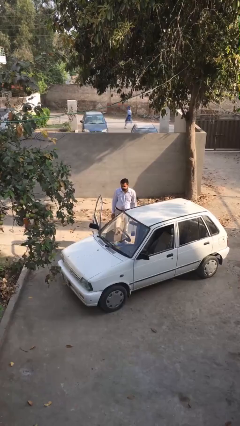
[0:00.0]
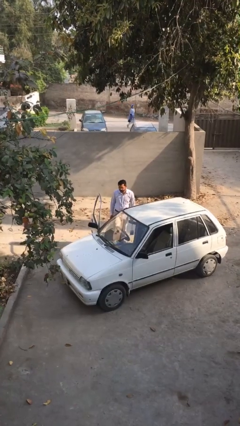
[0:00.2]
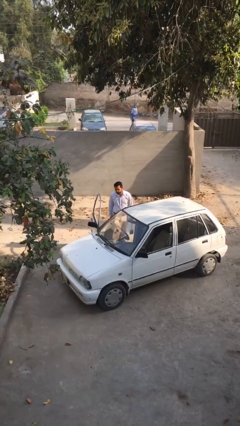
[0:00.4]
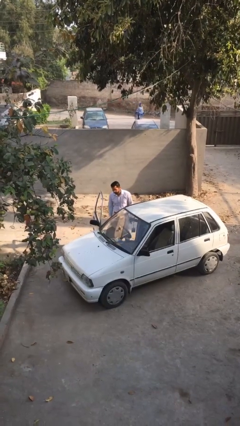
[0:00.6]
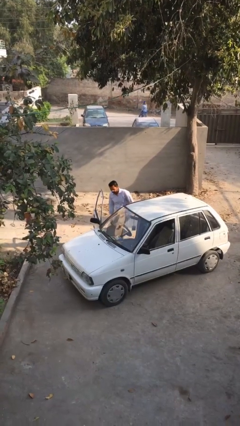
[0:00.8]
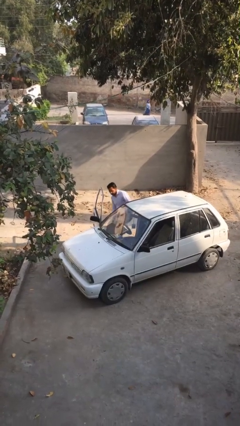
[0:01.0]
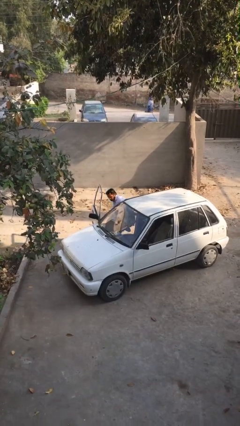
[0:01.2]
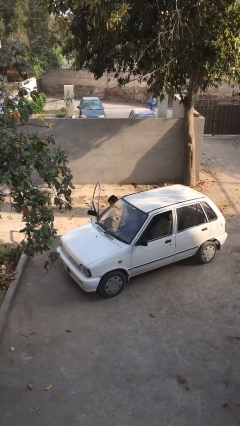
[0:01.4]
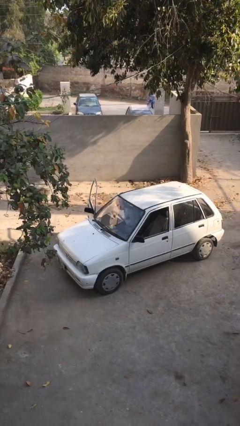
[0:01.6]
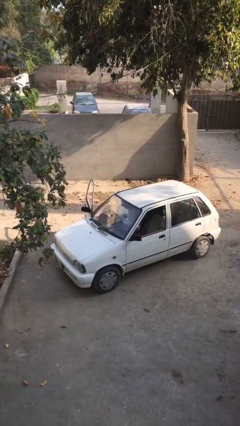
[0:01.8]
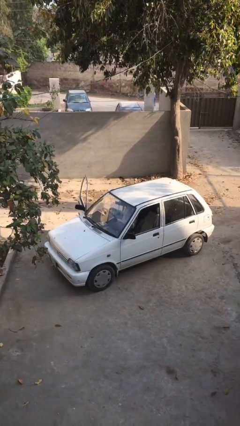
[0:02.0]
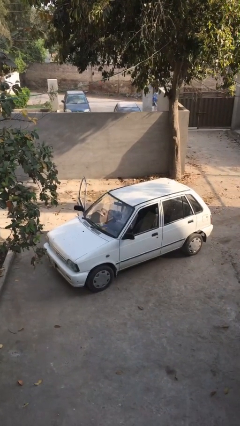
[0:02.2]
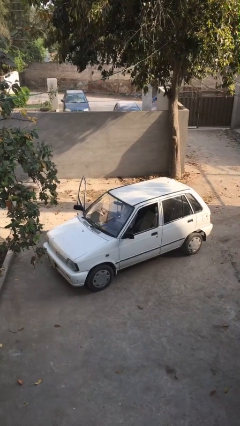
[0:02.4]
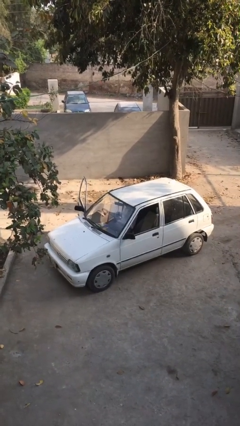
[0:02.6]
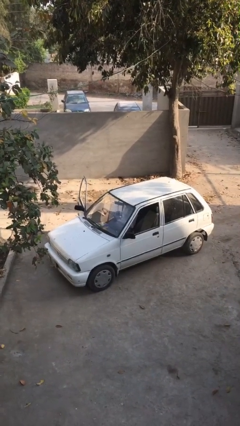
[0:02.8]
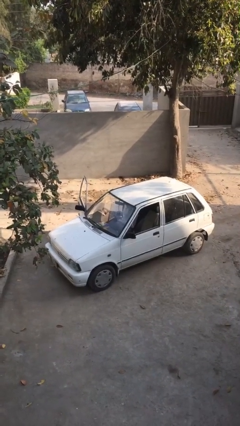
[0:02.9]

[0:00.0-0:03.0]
person enters car

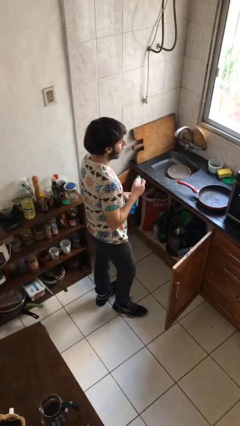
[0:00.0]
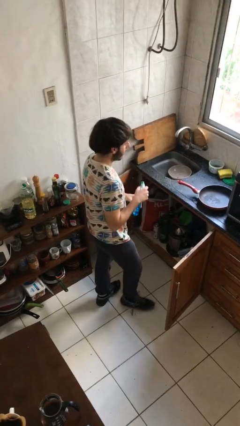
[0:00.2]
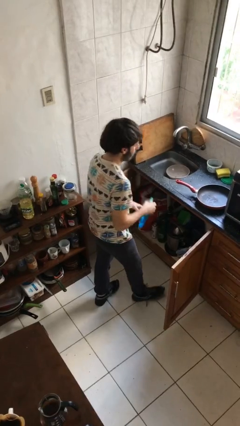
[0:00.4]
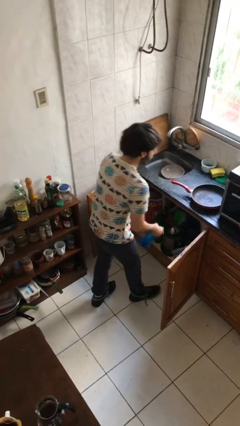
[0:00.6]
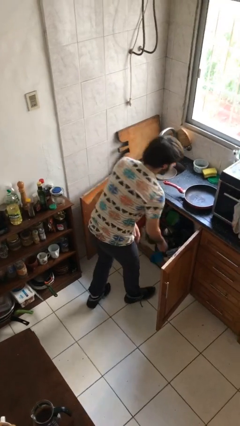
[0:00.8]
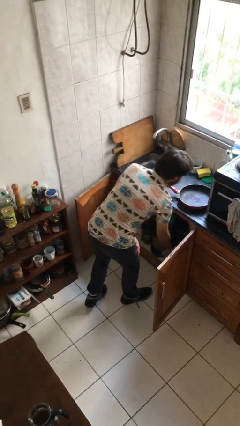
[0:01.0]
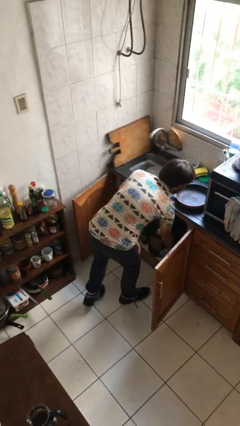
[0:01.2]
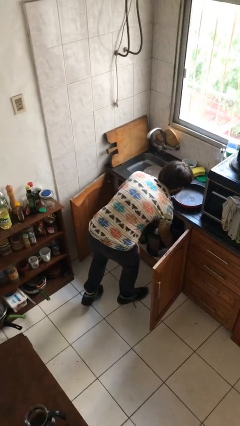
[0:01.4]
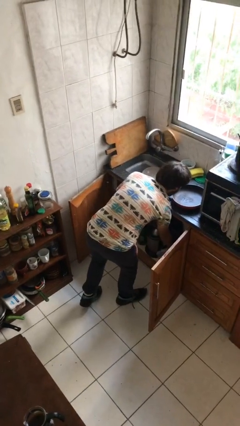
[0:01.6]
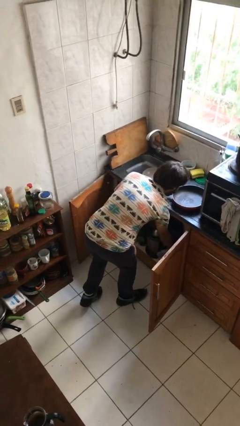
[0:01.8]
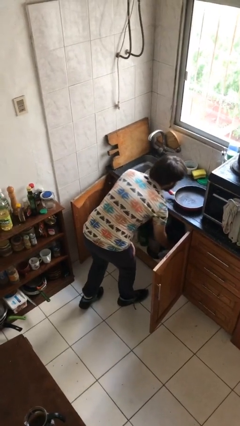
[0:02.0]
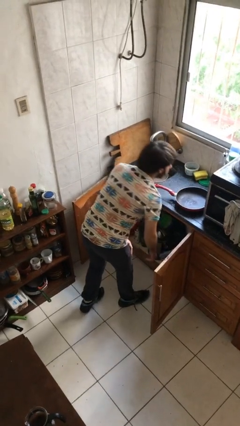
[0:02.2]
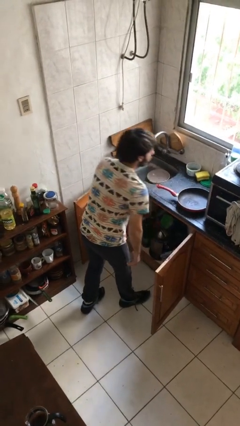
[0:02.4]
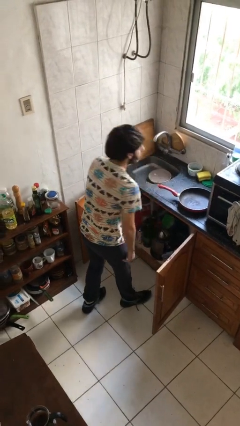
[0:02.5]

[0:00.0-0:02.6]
person puts down object into cabinet

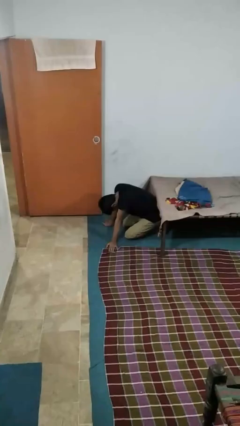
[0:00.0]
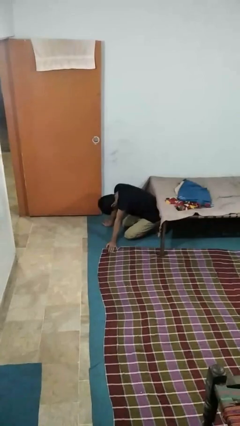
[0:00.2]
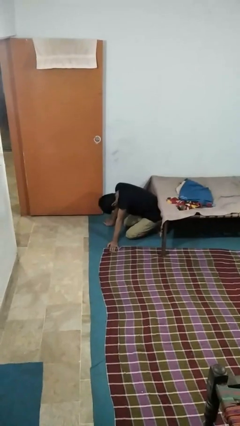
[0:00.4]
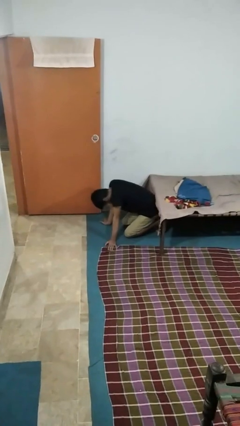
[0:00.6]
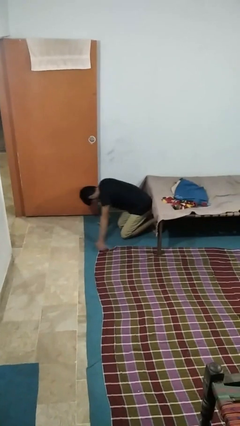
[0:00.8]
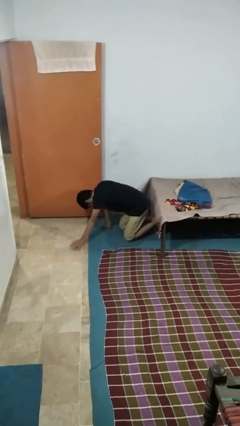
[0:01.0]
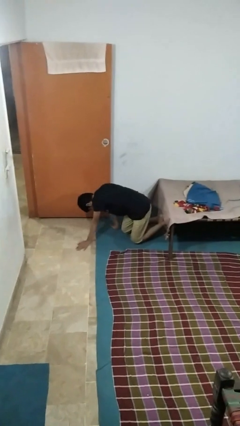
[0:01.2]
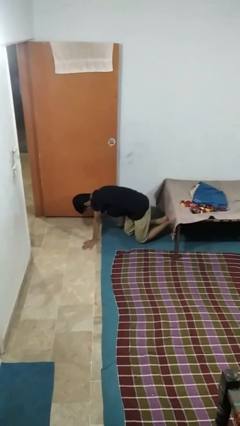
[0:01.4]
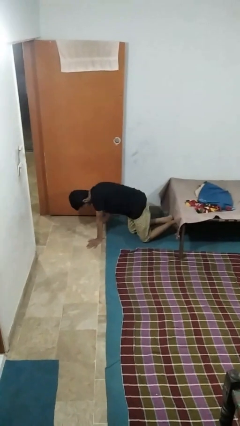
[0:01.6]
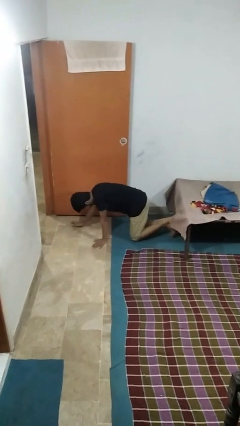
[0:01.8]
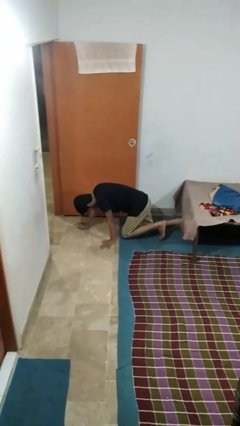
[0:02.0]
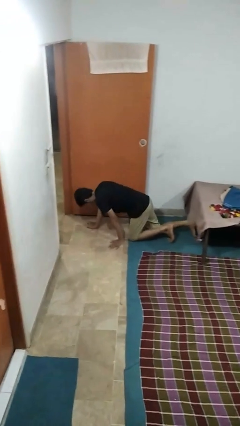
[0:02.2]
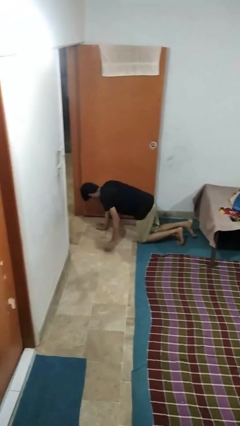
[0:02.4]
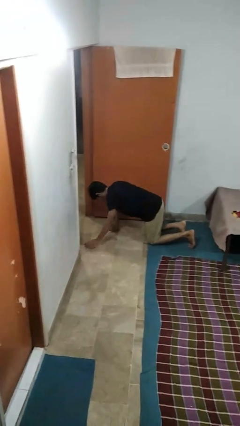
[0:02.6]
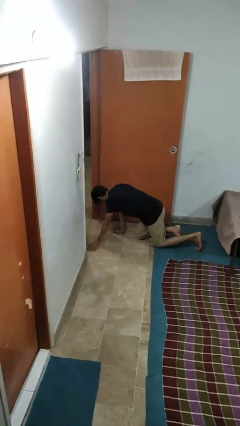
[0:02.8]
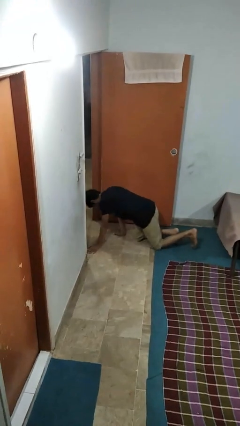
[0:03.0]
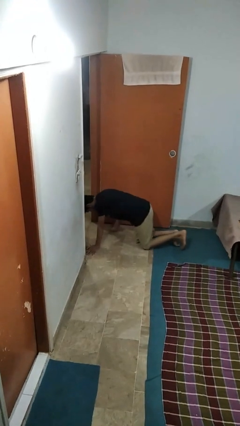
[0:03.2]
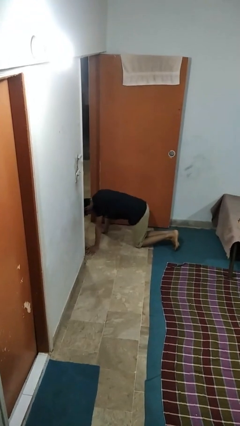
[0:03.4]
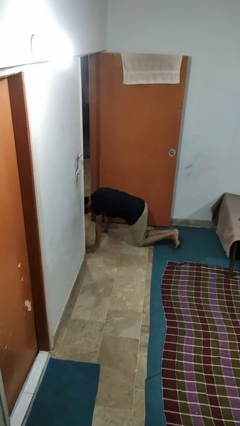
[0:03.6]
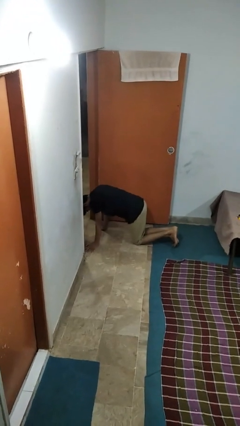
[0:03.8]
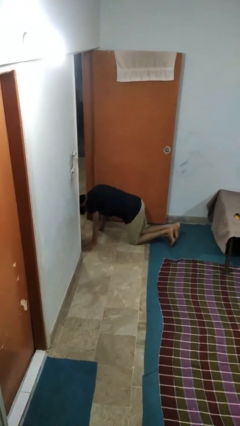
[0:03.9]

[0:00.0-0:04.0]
person crawls

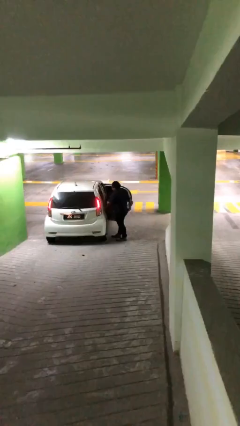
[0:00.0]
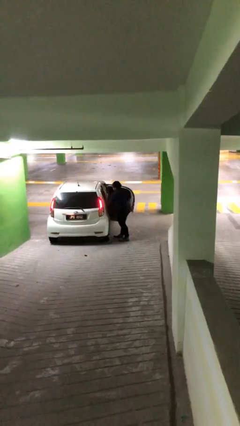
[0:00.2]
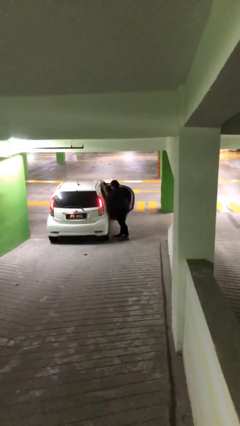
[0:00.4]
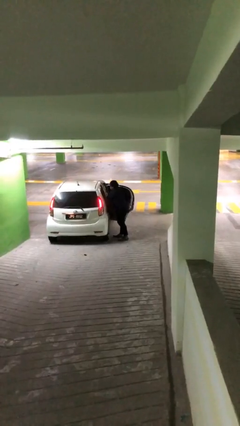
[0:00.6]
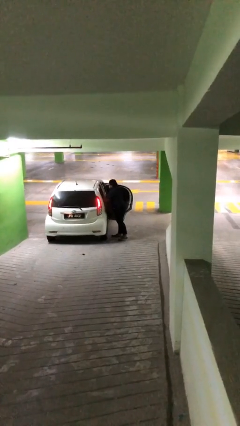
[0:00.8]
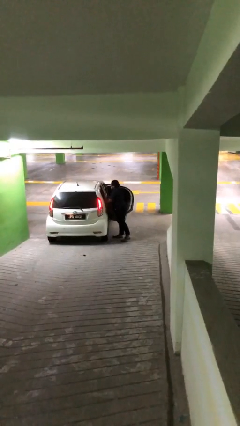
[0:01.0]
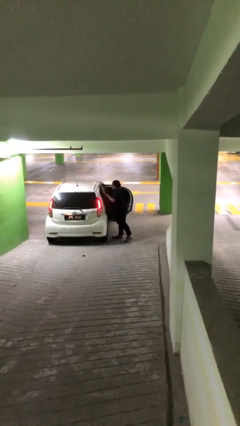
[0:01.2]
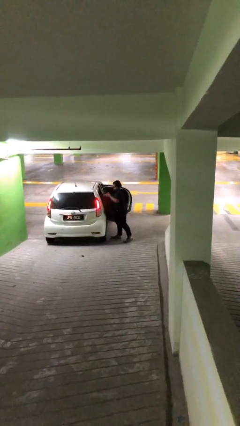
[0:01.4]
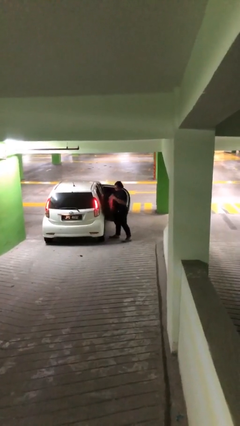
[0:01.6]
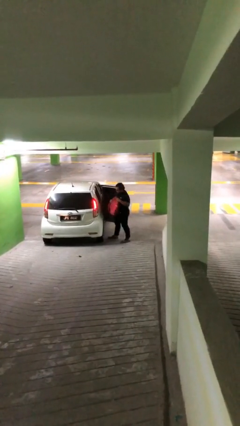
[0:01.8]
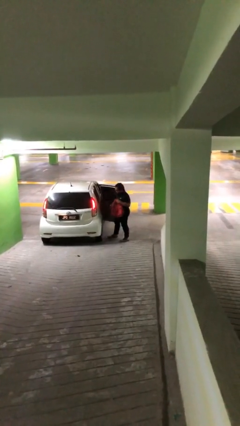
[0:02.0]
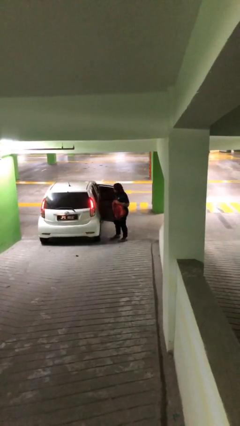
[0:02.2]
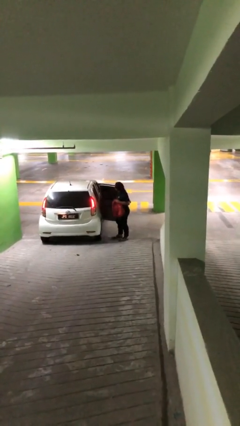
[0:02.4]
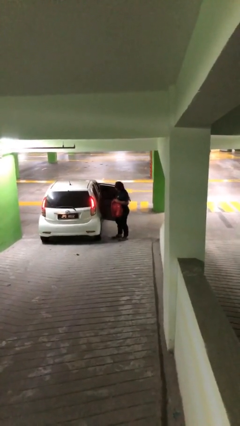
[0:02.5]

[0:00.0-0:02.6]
person unloads car

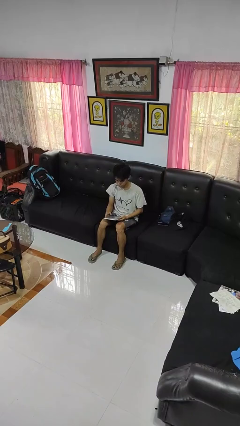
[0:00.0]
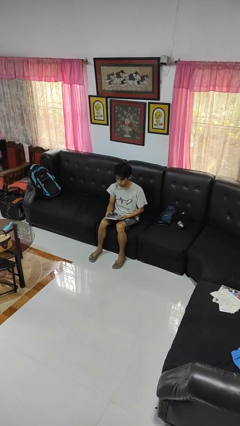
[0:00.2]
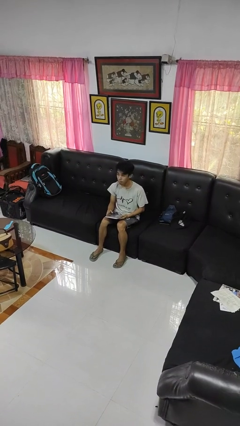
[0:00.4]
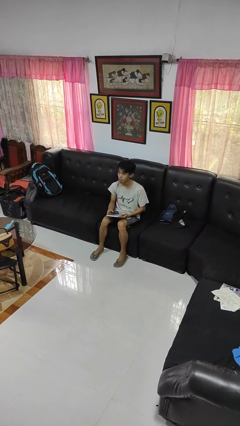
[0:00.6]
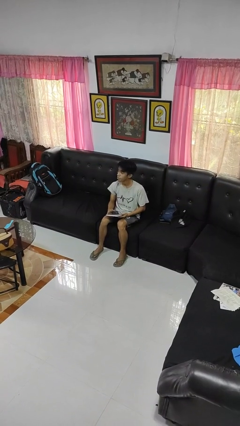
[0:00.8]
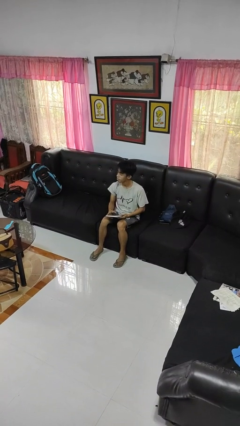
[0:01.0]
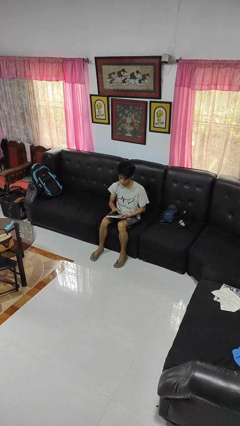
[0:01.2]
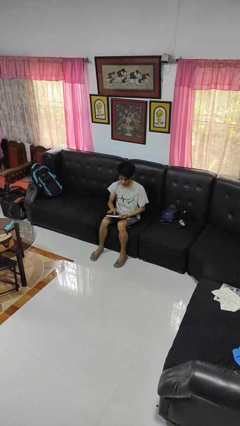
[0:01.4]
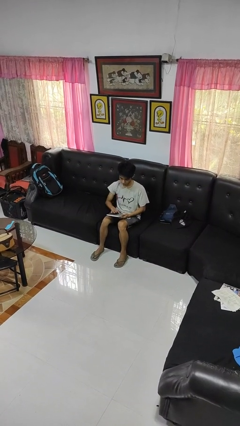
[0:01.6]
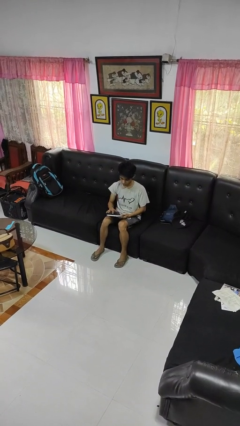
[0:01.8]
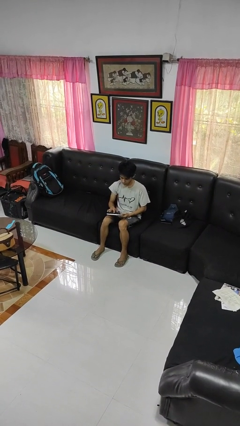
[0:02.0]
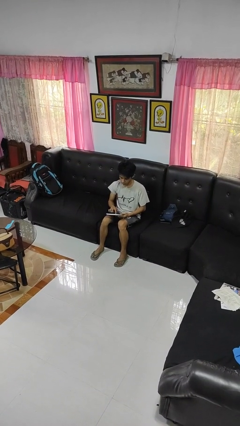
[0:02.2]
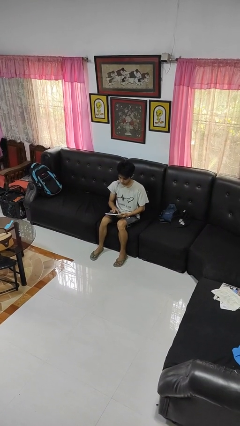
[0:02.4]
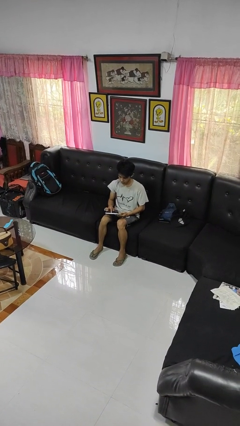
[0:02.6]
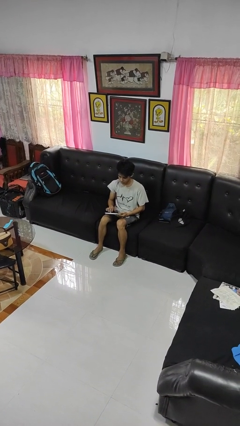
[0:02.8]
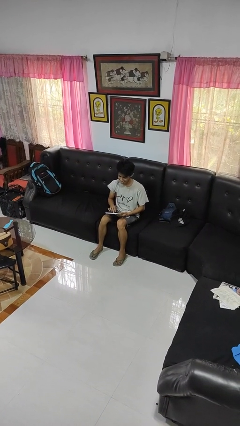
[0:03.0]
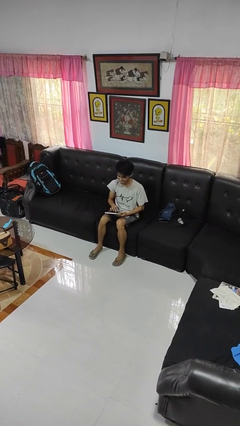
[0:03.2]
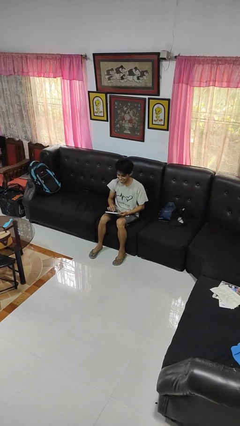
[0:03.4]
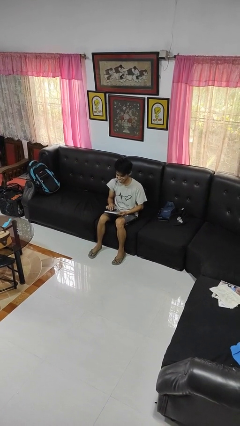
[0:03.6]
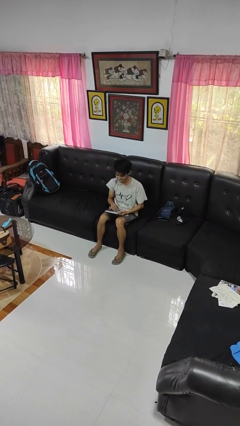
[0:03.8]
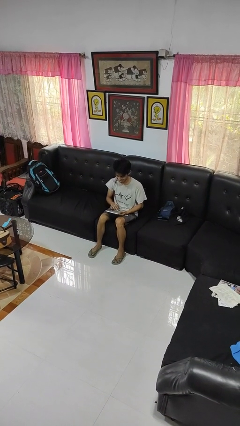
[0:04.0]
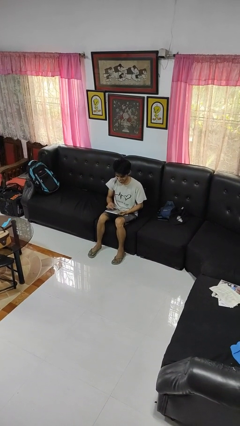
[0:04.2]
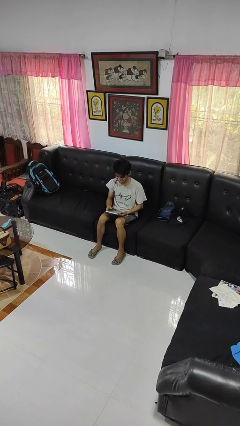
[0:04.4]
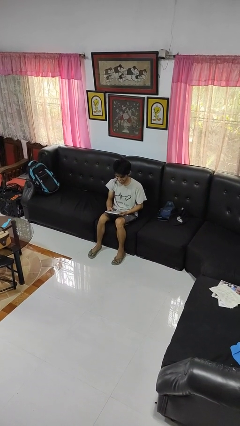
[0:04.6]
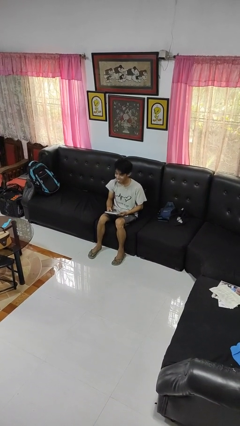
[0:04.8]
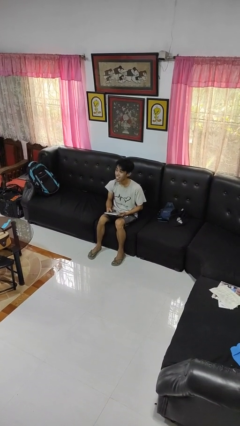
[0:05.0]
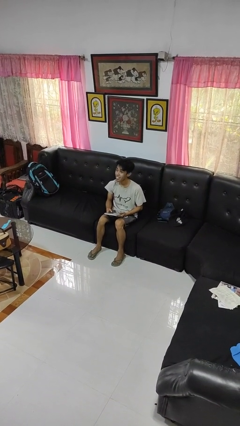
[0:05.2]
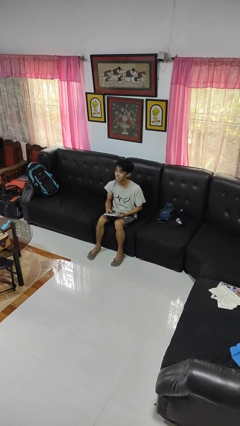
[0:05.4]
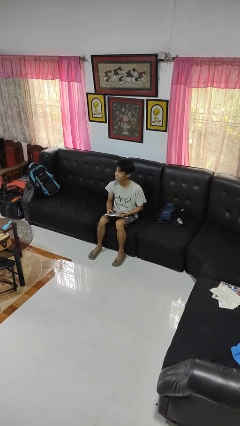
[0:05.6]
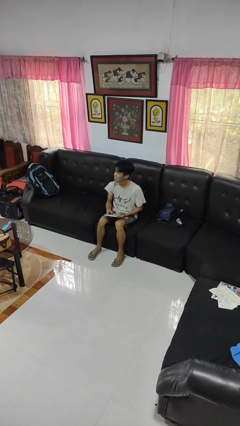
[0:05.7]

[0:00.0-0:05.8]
person interacts with tablet
